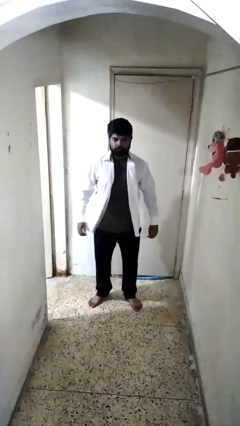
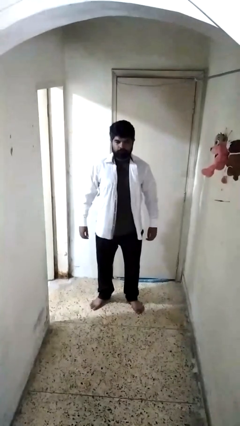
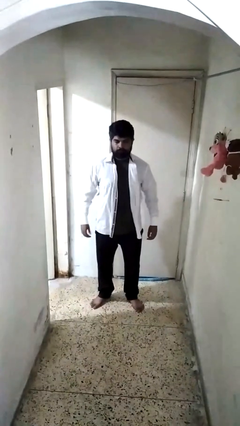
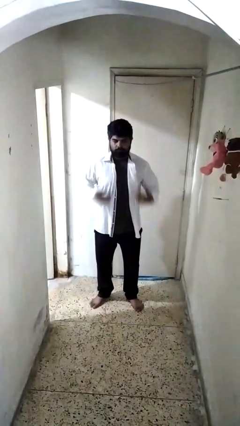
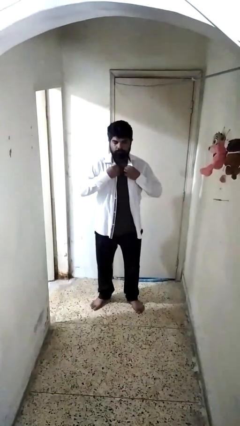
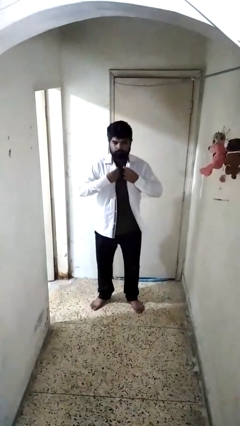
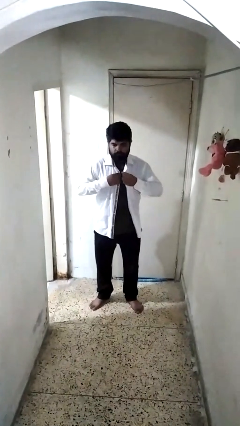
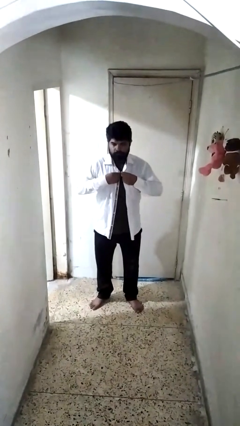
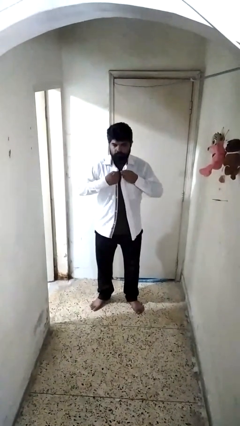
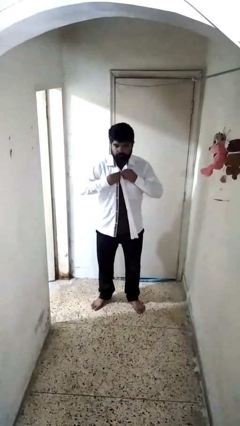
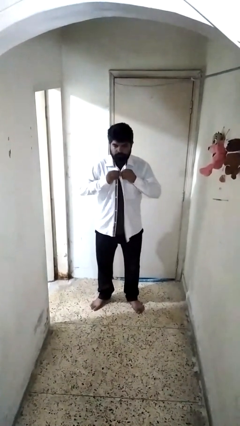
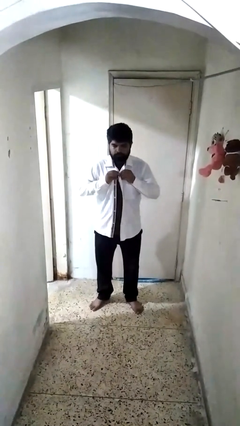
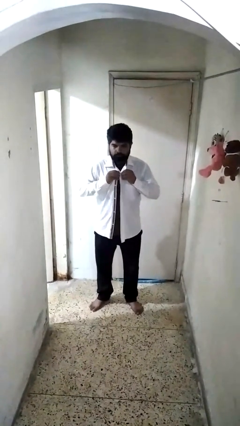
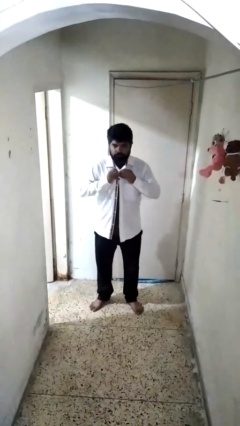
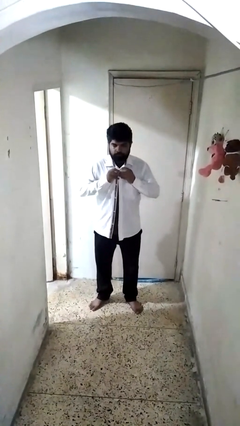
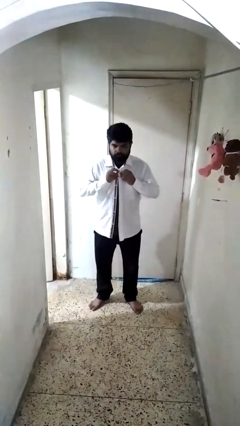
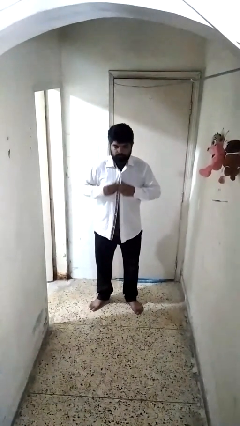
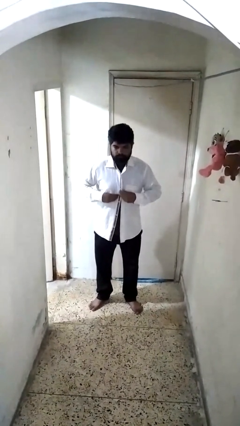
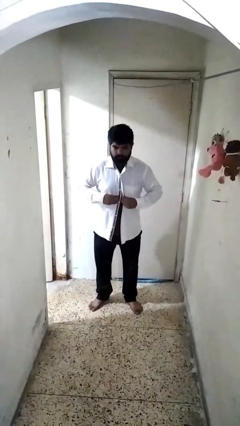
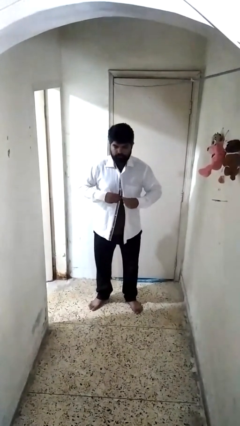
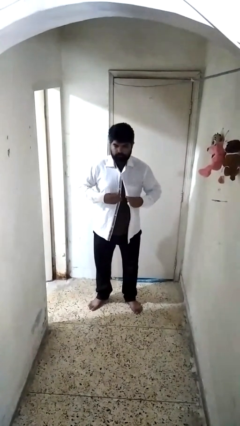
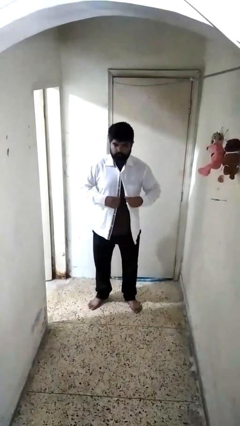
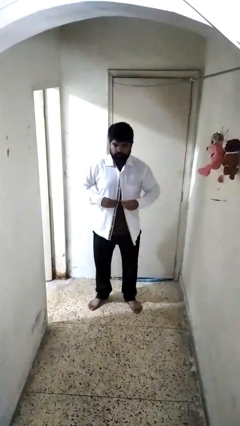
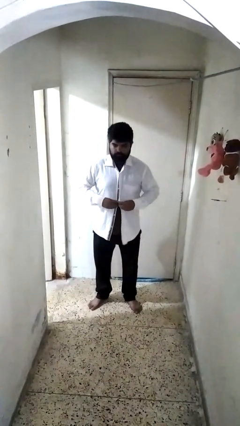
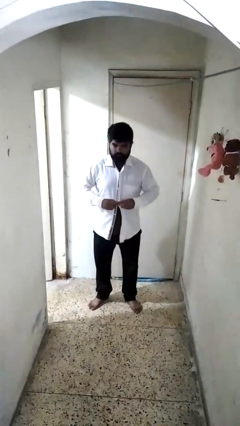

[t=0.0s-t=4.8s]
person buttons shirt

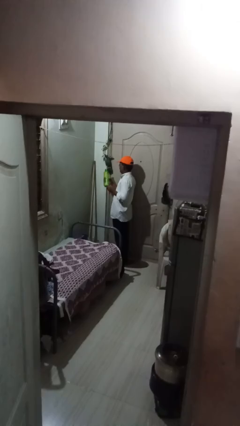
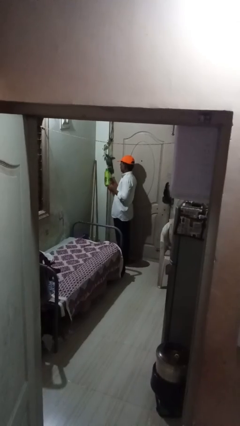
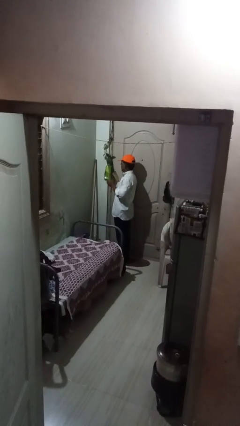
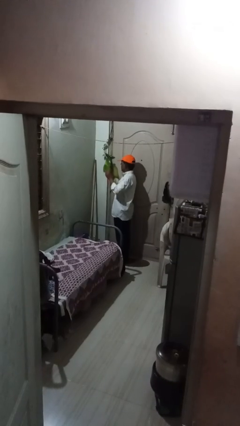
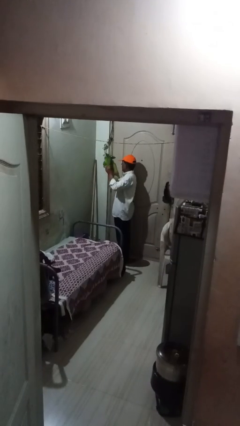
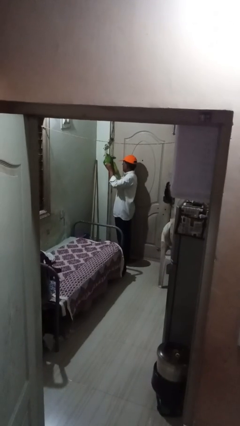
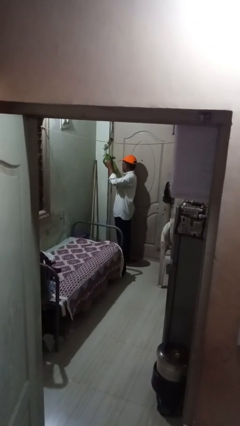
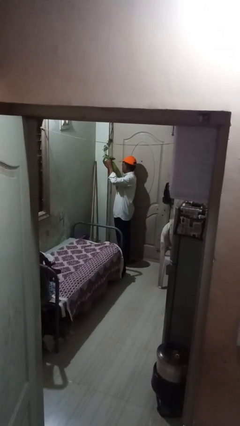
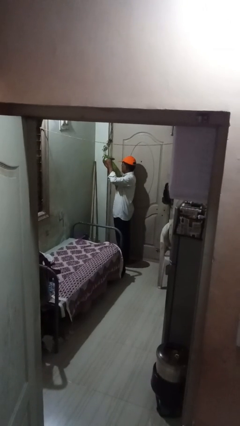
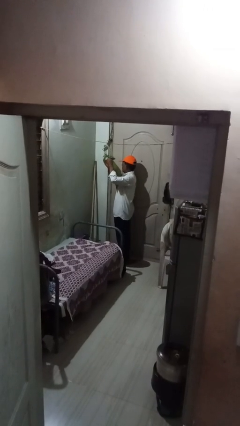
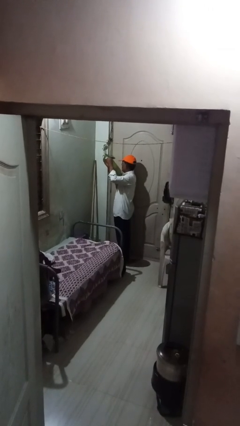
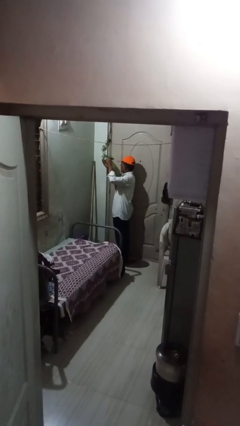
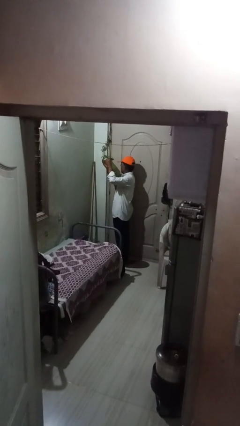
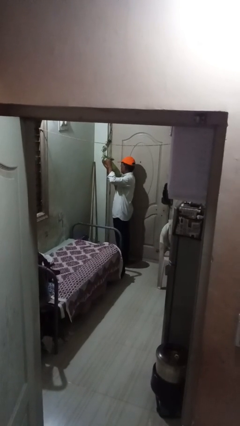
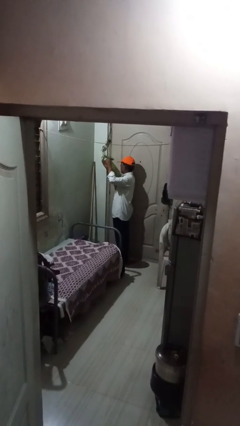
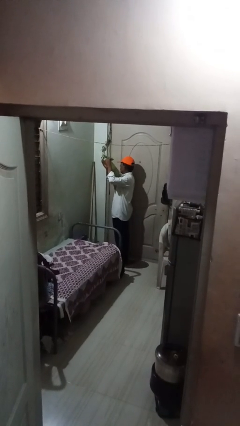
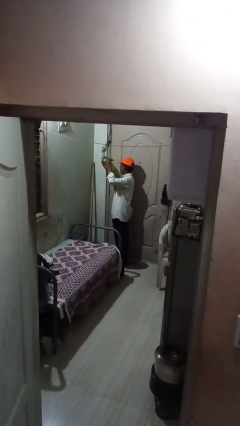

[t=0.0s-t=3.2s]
person waters houseplant

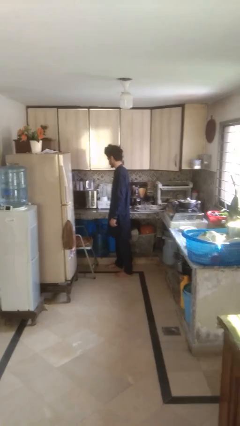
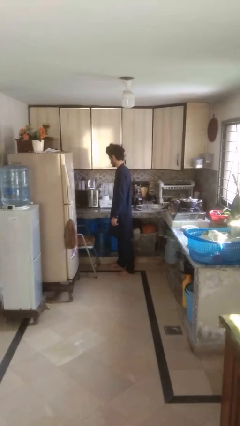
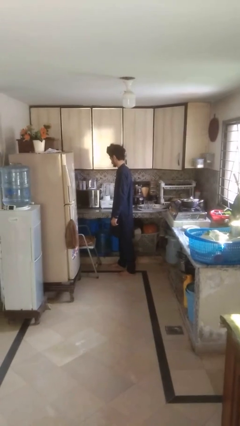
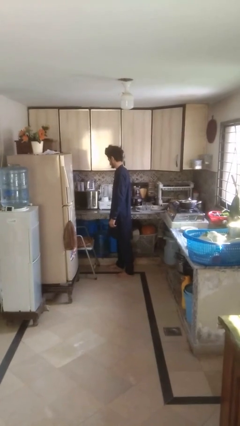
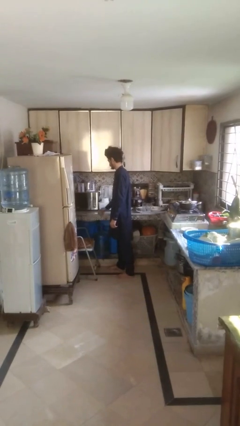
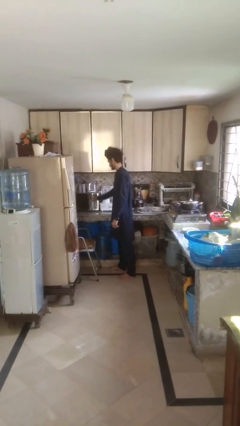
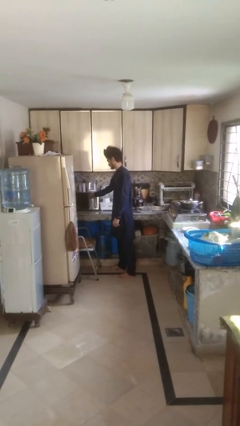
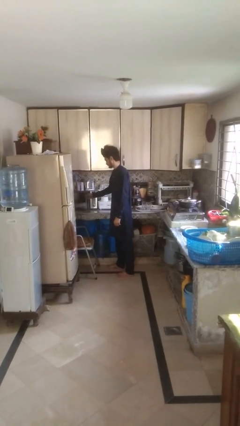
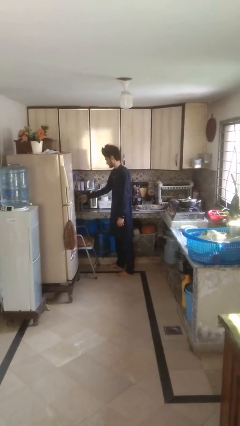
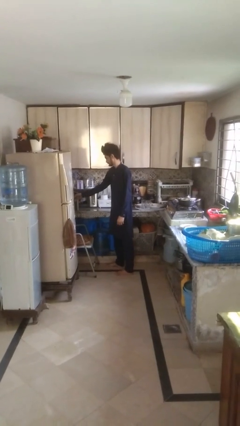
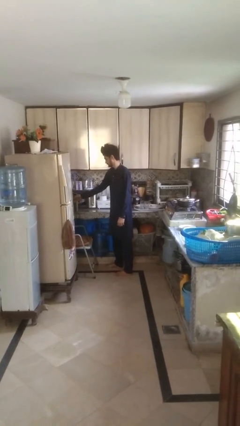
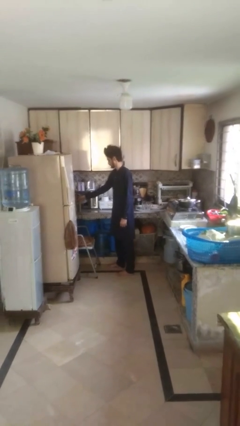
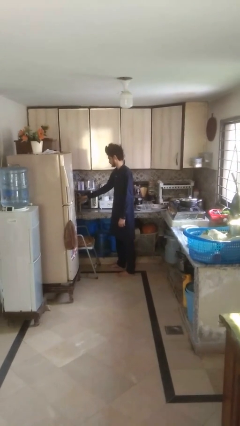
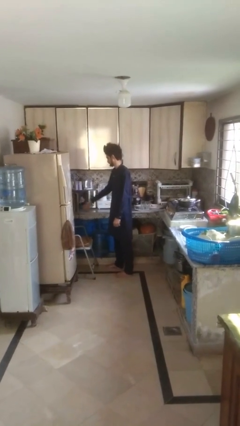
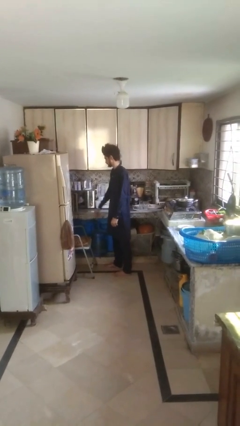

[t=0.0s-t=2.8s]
person opens oven door

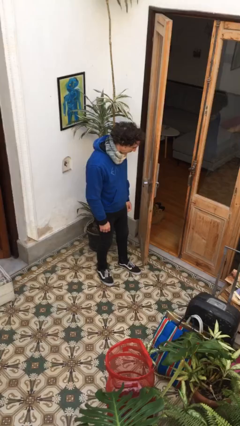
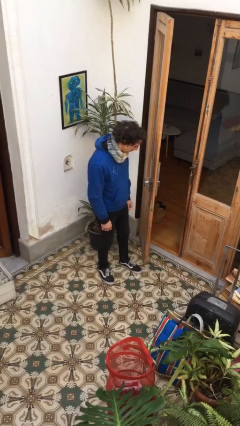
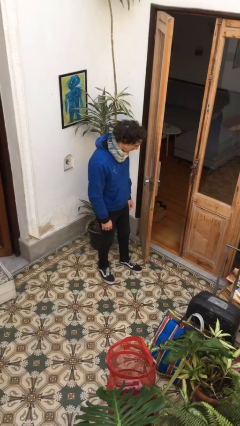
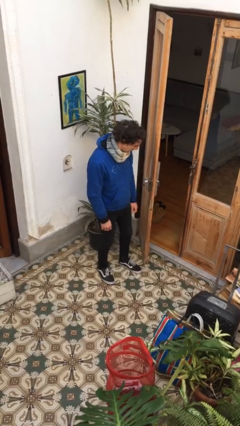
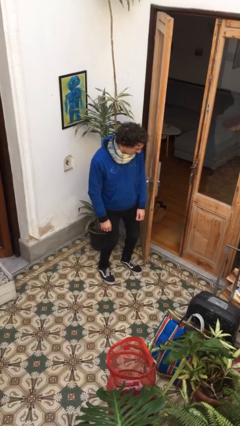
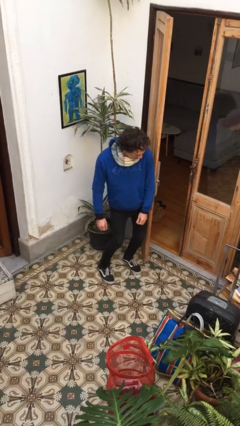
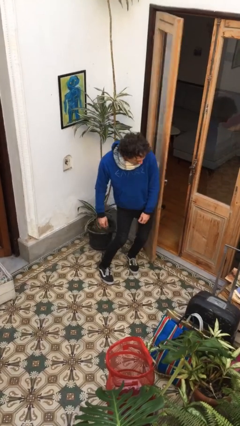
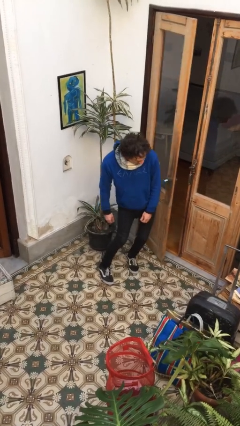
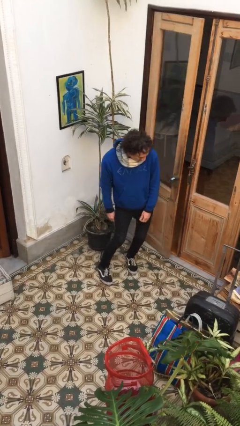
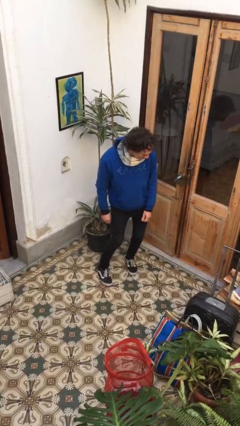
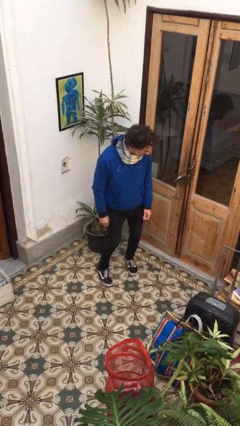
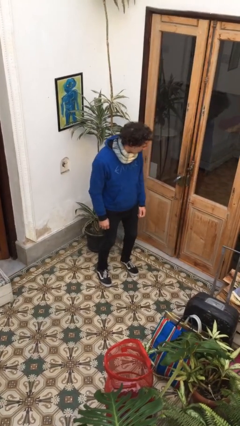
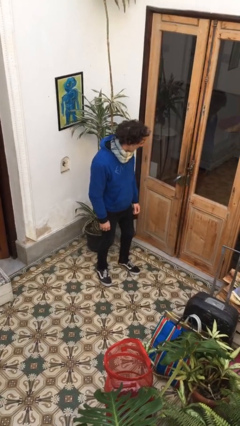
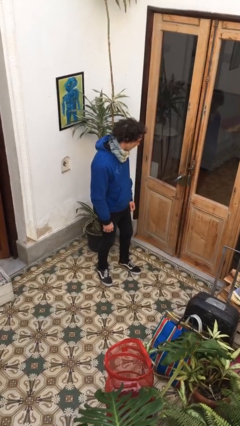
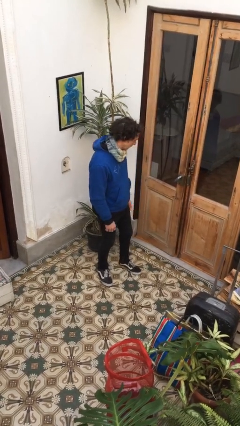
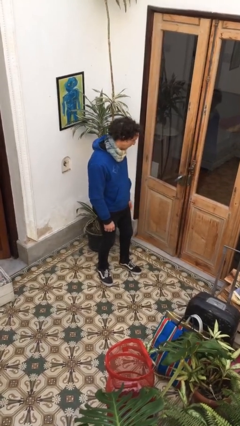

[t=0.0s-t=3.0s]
person closes door with hip

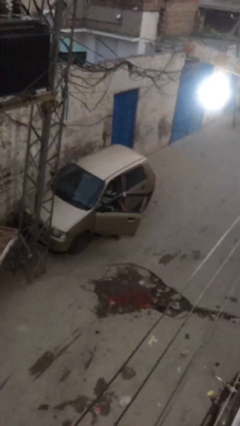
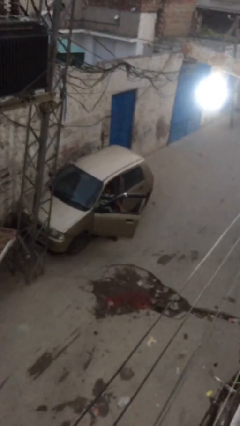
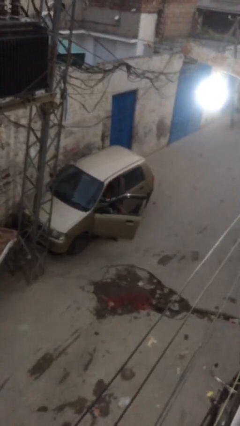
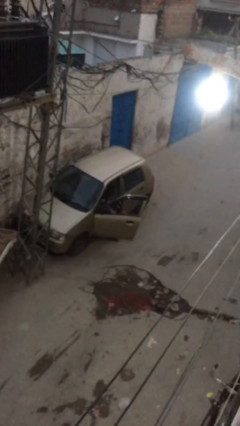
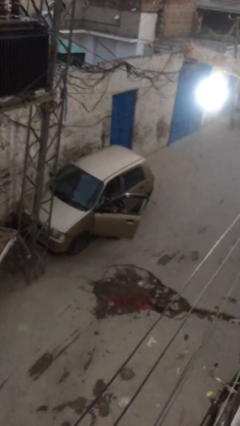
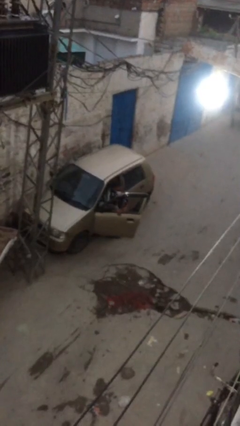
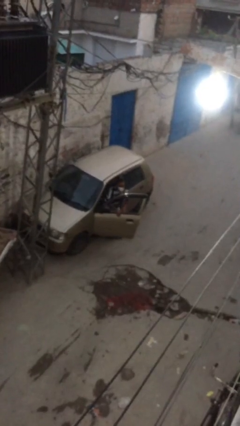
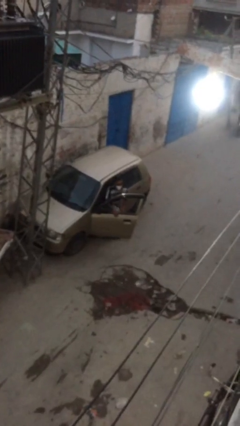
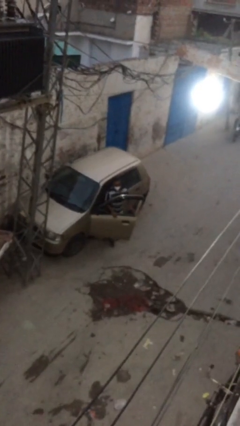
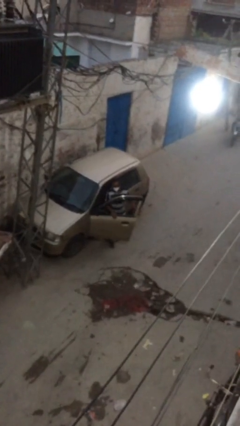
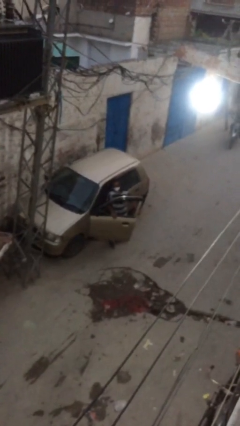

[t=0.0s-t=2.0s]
person exits car

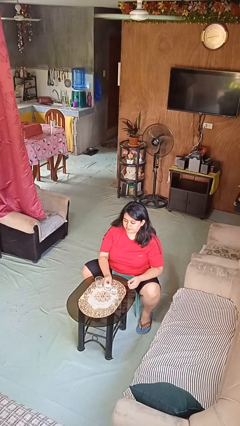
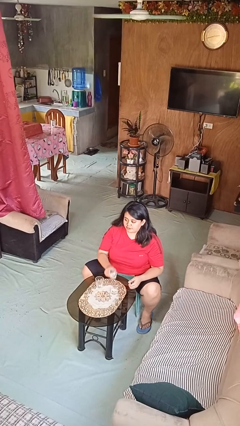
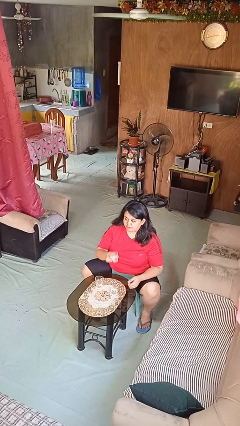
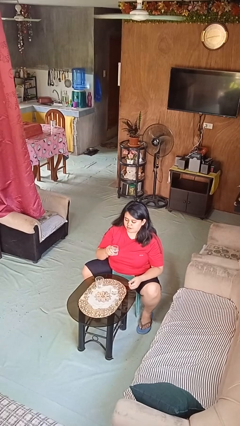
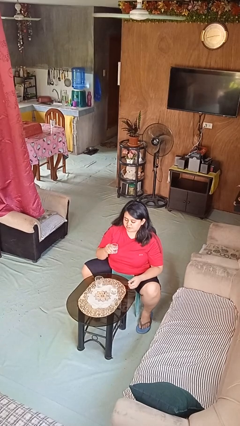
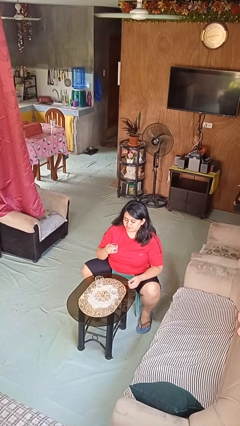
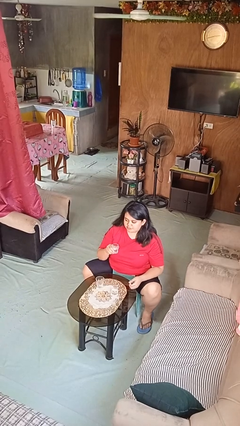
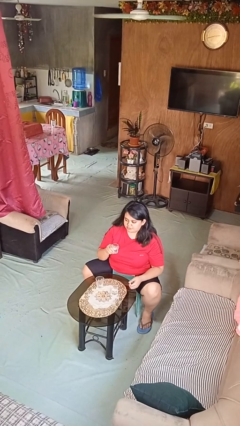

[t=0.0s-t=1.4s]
person picks up object from table

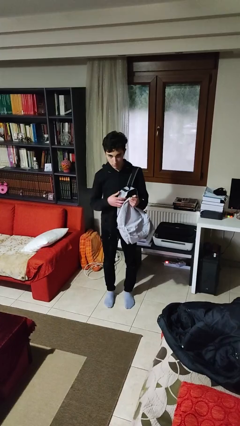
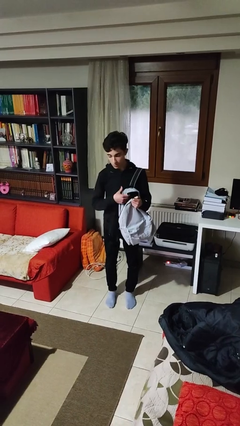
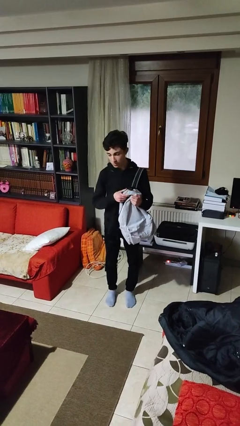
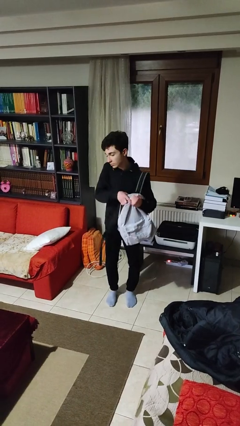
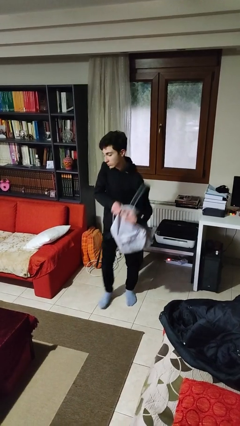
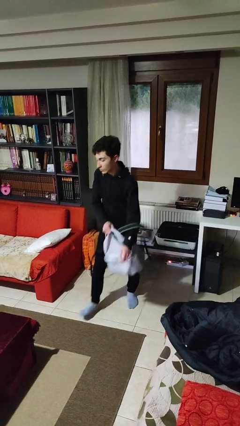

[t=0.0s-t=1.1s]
person searches in backpack
